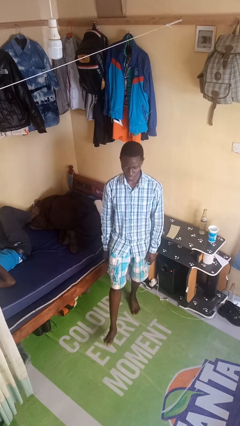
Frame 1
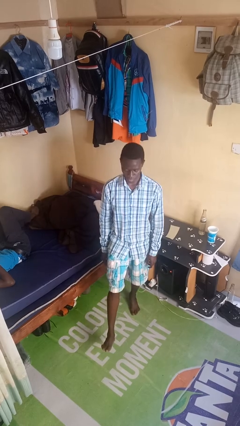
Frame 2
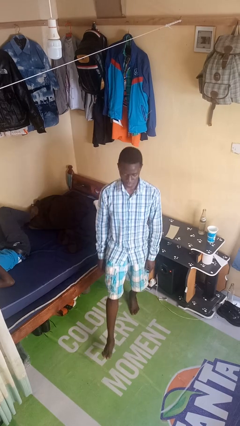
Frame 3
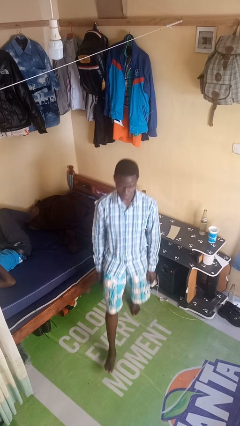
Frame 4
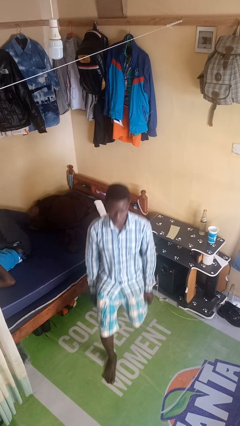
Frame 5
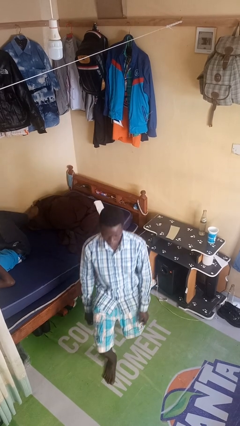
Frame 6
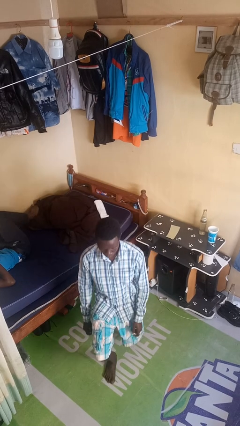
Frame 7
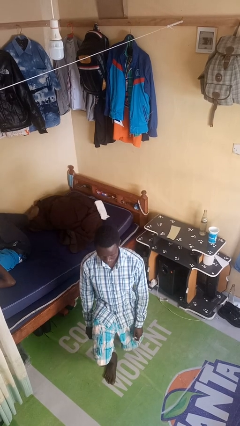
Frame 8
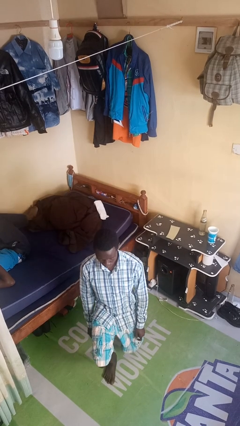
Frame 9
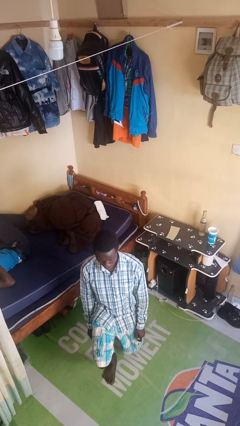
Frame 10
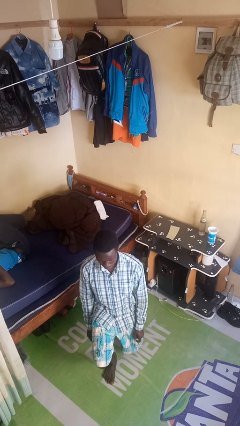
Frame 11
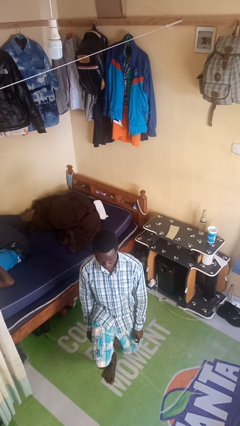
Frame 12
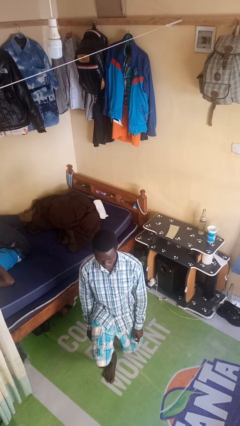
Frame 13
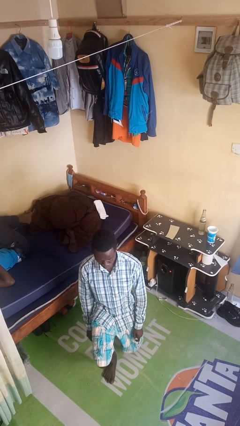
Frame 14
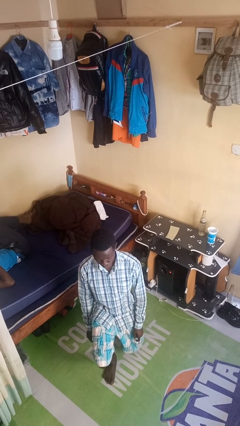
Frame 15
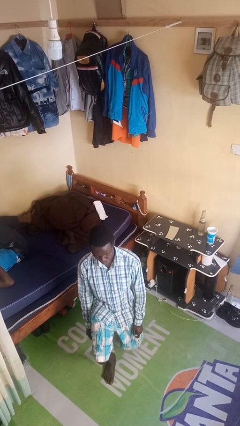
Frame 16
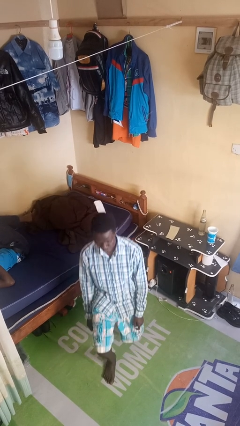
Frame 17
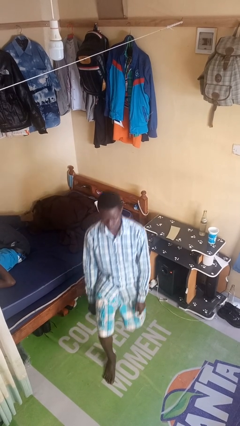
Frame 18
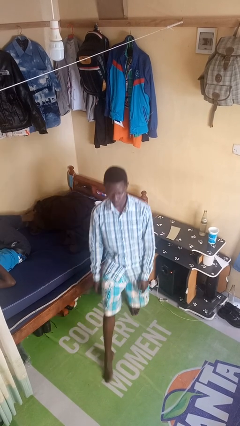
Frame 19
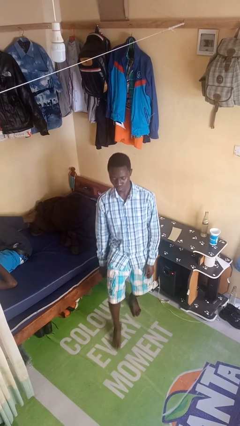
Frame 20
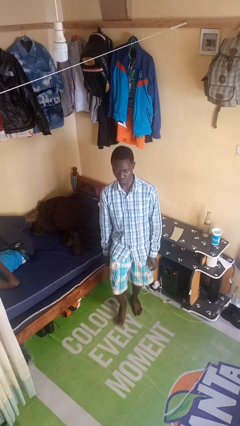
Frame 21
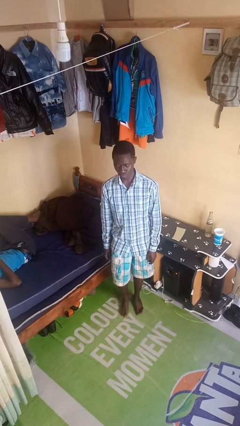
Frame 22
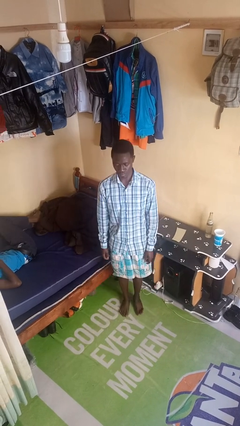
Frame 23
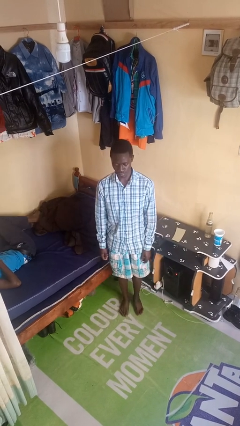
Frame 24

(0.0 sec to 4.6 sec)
person exercises with lunges

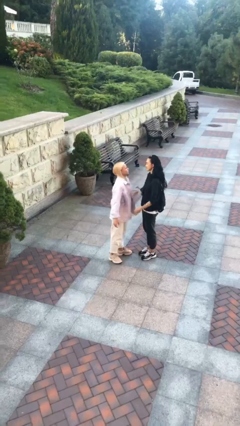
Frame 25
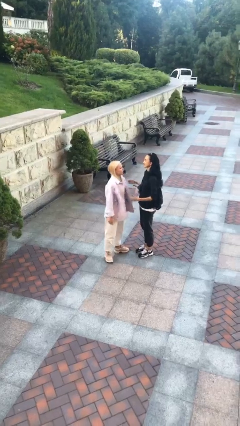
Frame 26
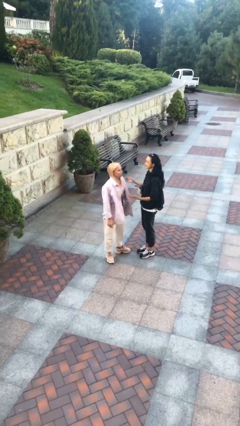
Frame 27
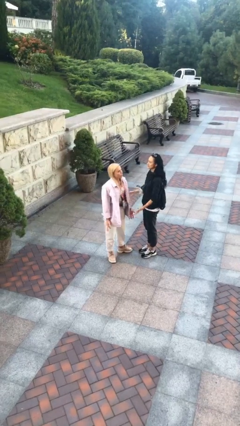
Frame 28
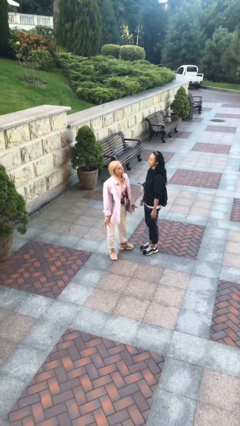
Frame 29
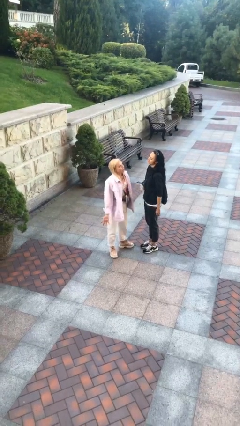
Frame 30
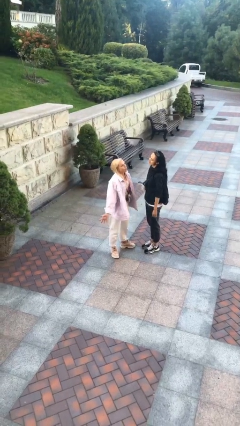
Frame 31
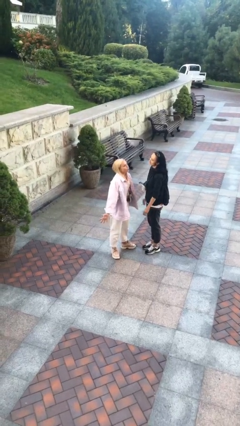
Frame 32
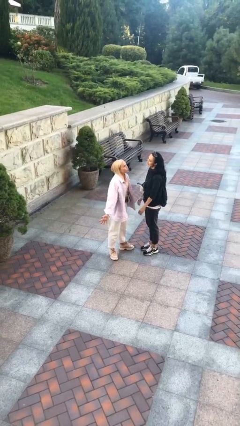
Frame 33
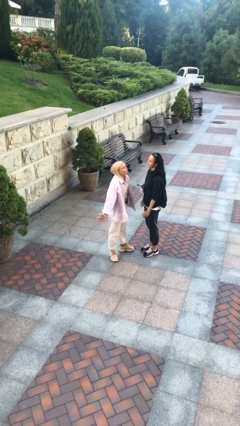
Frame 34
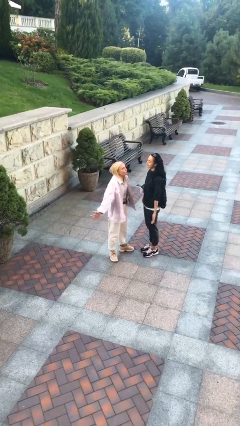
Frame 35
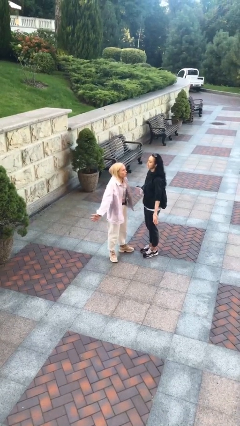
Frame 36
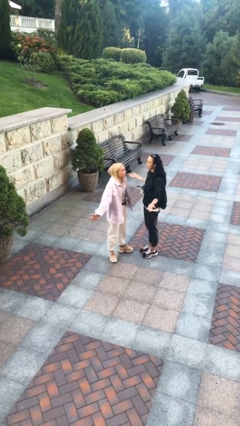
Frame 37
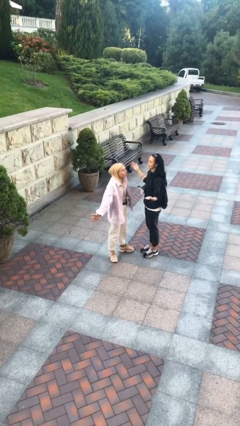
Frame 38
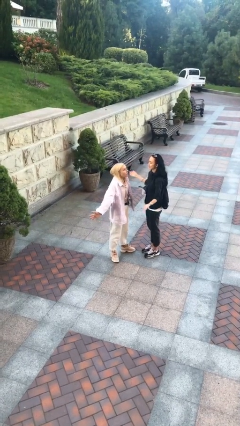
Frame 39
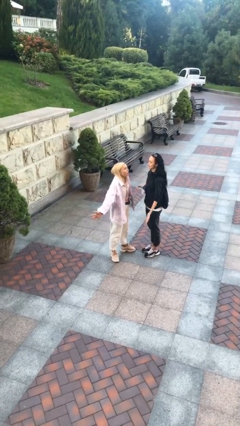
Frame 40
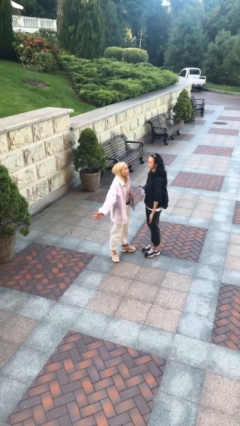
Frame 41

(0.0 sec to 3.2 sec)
person talks to person

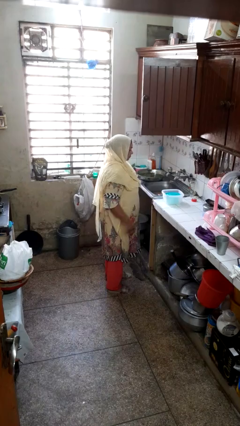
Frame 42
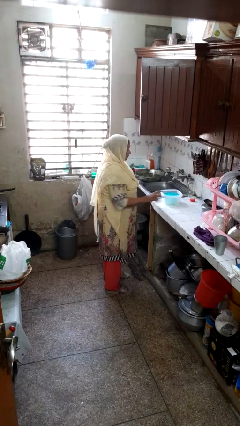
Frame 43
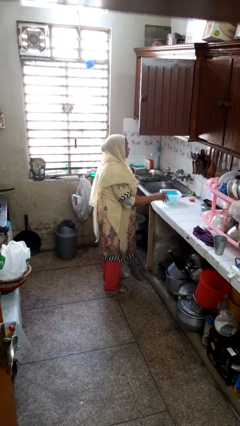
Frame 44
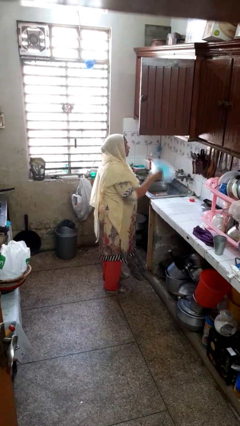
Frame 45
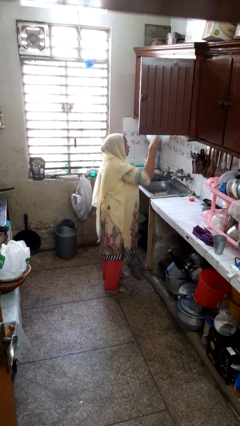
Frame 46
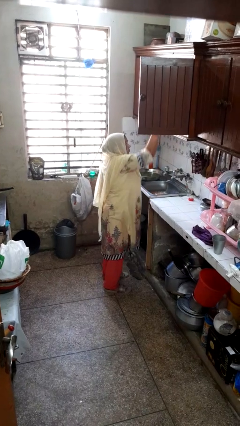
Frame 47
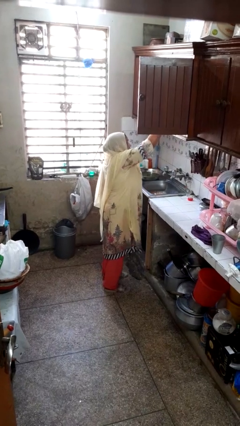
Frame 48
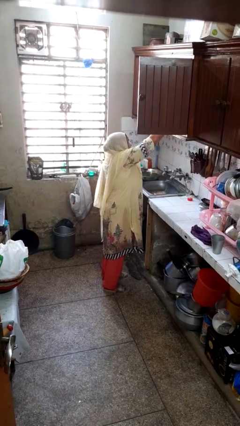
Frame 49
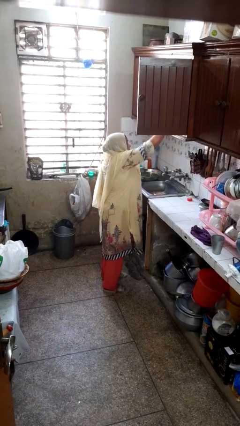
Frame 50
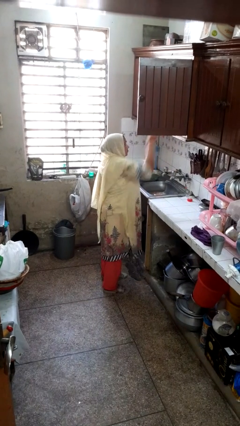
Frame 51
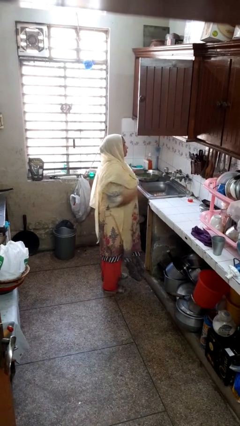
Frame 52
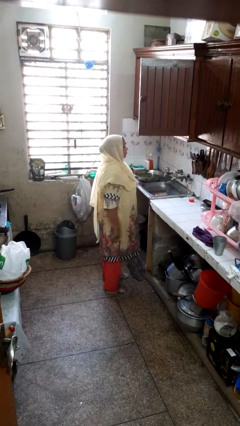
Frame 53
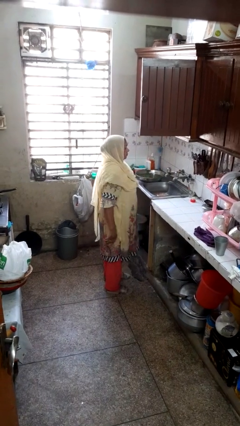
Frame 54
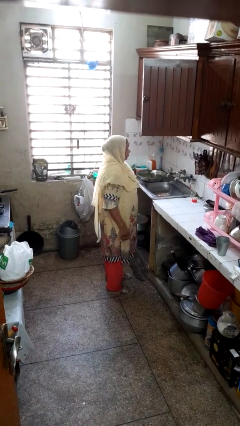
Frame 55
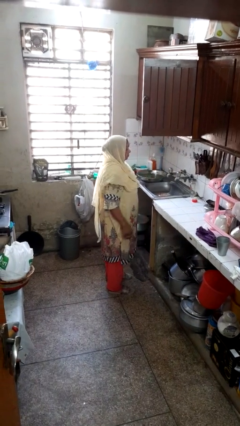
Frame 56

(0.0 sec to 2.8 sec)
person puts object in cabinet

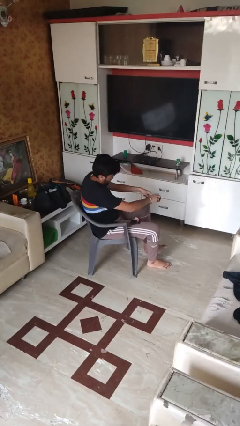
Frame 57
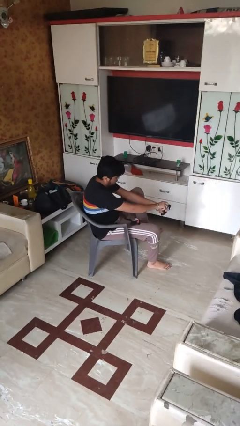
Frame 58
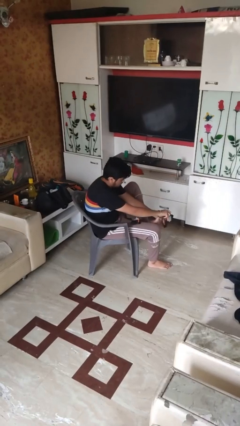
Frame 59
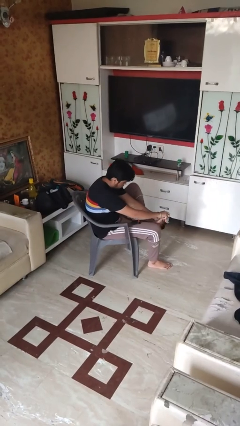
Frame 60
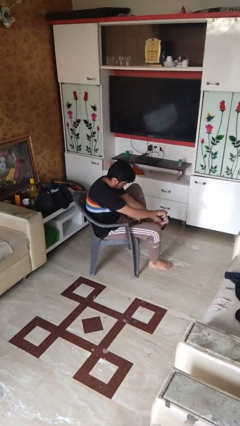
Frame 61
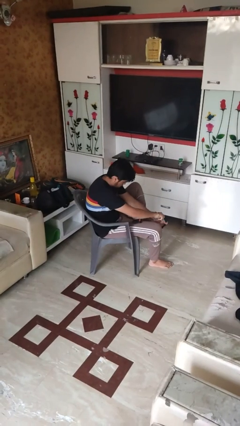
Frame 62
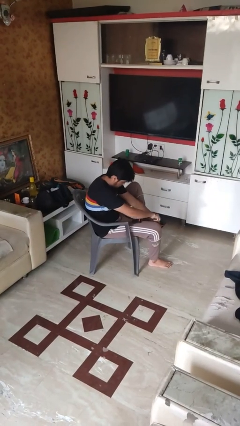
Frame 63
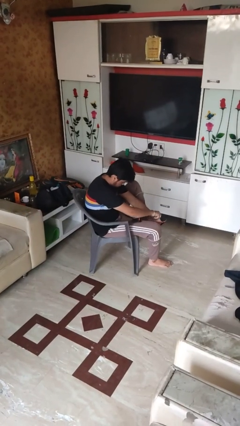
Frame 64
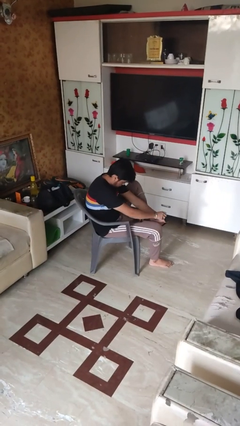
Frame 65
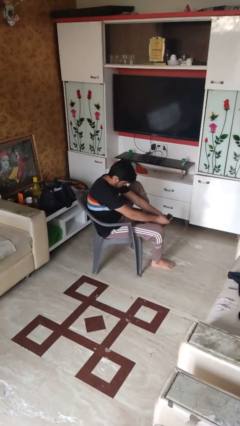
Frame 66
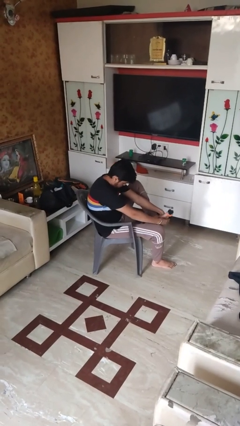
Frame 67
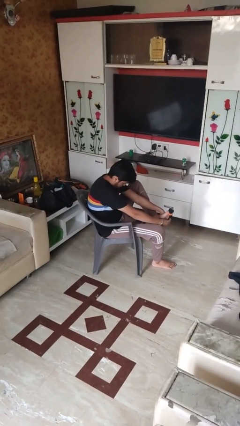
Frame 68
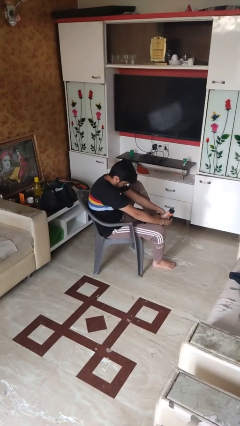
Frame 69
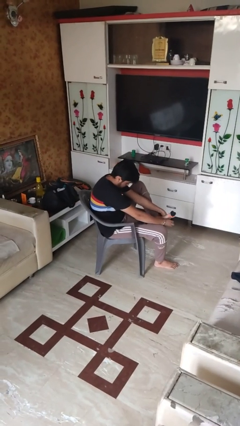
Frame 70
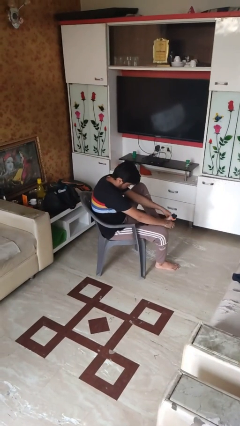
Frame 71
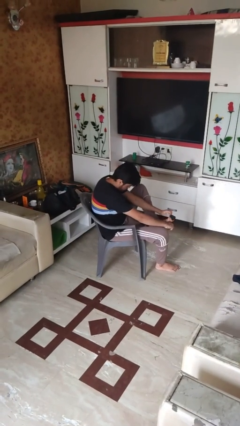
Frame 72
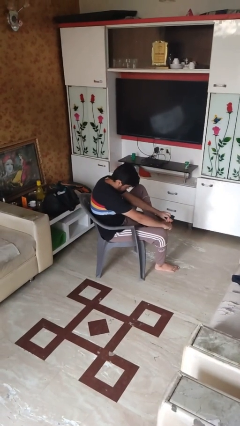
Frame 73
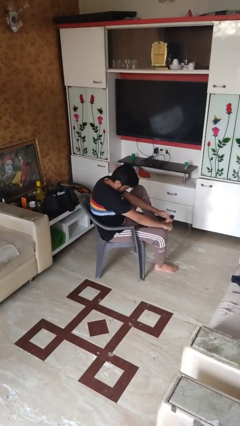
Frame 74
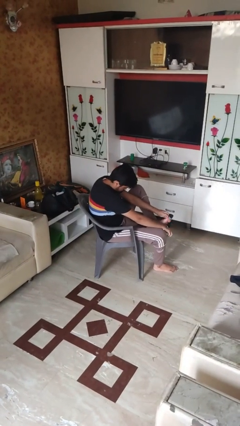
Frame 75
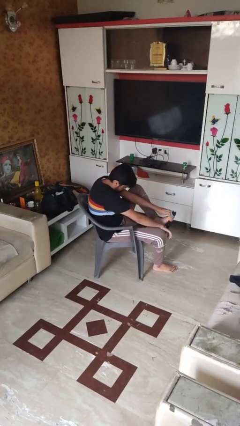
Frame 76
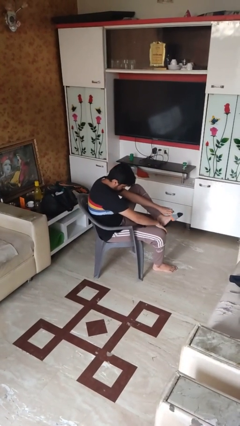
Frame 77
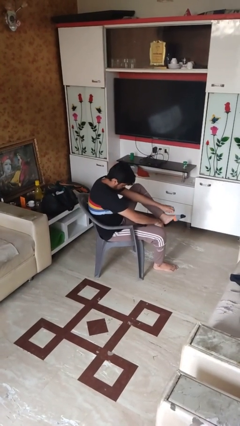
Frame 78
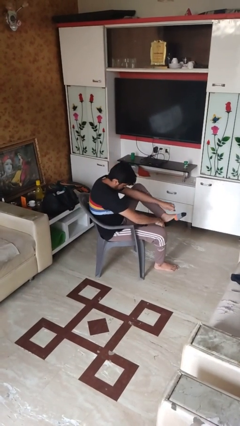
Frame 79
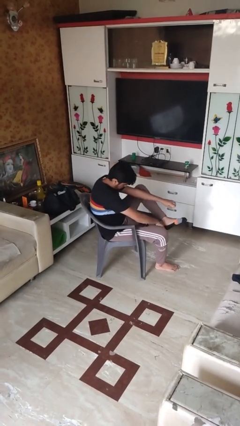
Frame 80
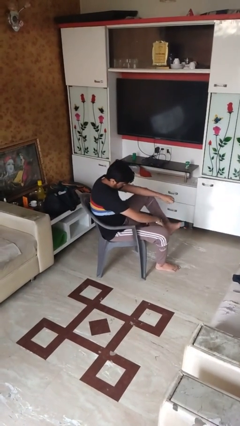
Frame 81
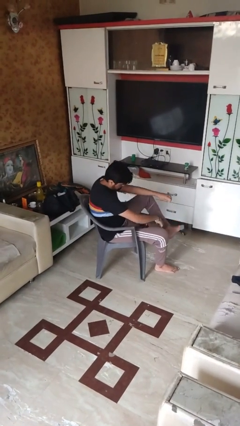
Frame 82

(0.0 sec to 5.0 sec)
person puts on socks

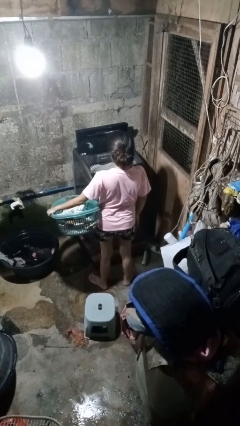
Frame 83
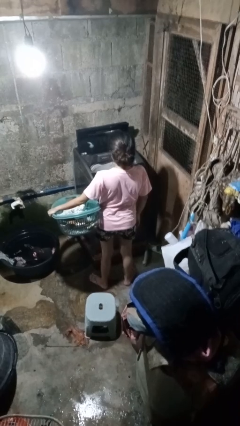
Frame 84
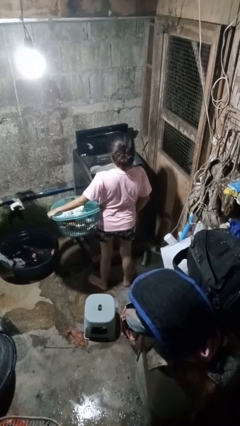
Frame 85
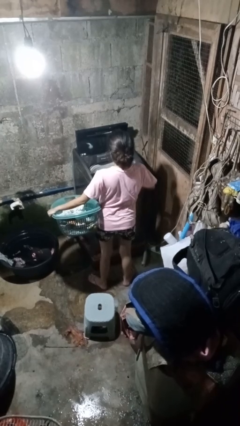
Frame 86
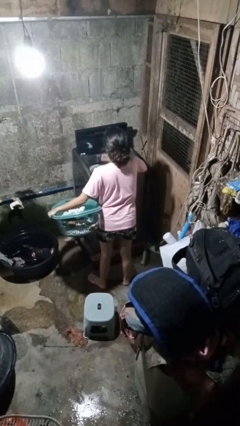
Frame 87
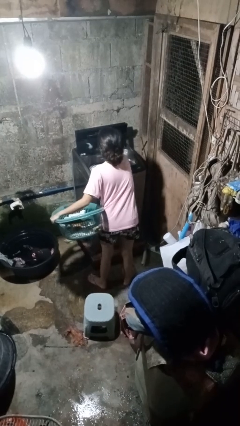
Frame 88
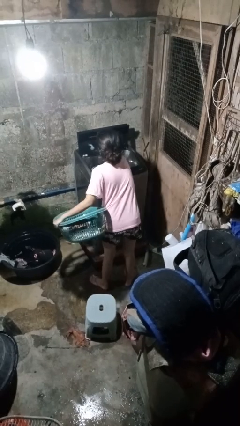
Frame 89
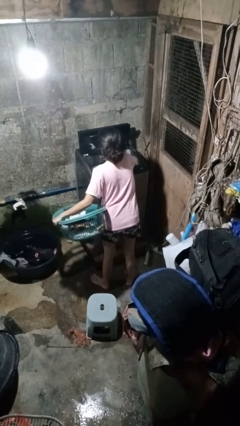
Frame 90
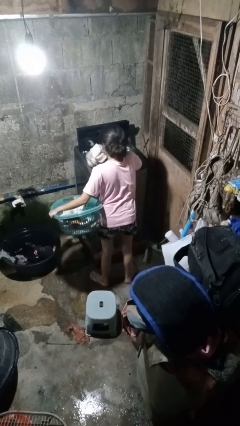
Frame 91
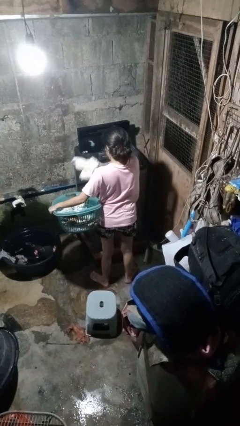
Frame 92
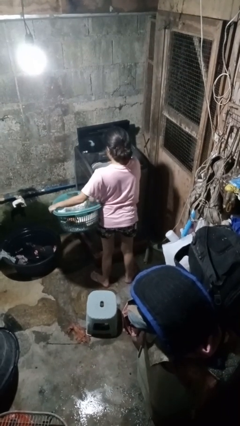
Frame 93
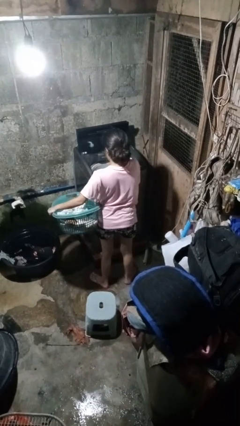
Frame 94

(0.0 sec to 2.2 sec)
person unloads dryer
